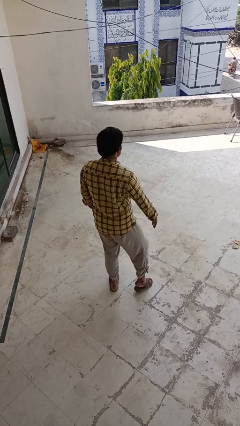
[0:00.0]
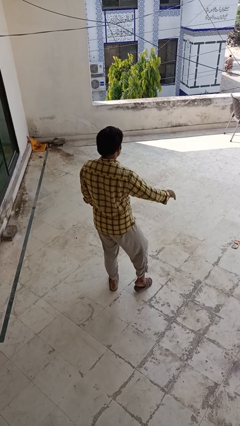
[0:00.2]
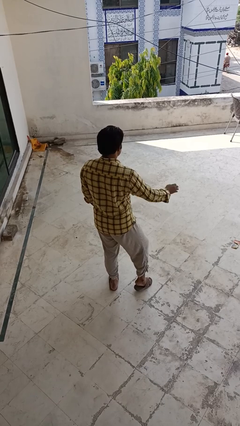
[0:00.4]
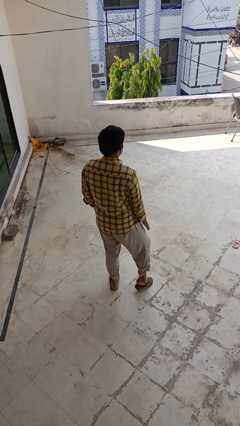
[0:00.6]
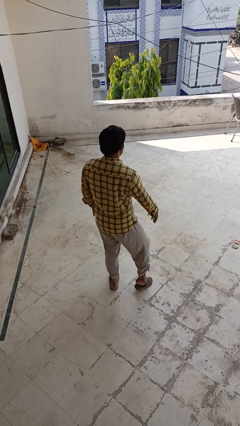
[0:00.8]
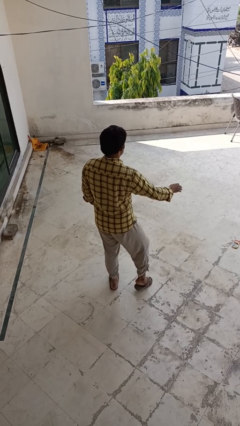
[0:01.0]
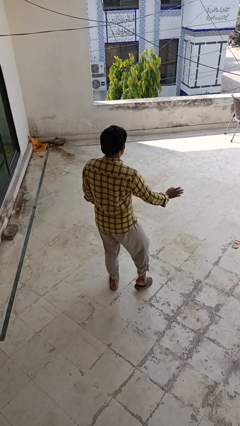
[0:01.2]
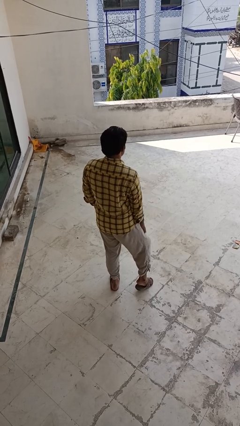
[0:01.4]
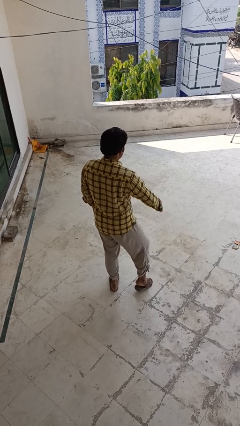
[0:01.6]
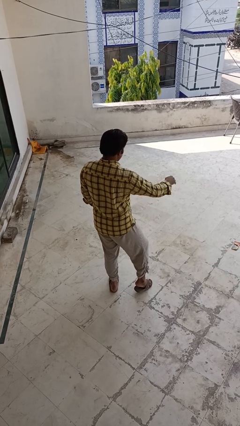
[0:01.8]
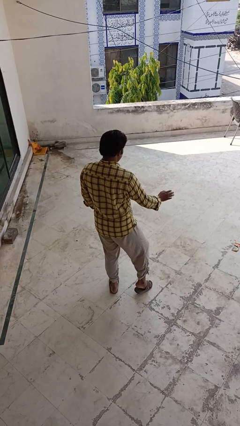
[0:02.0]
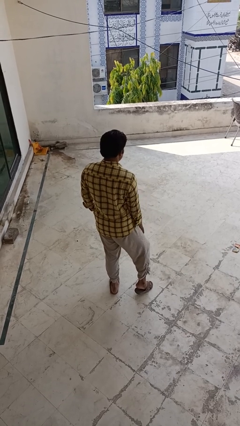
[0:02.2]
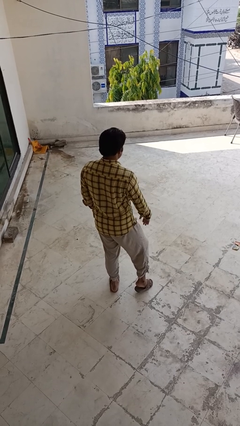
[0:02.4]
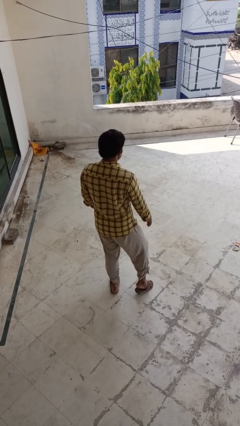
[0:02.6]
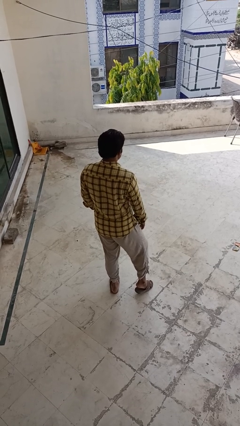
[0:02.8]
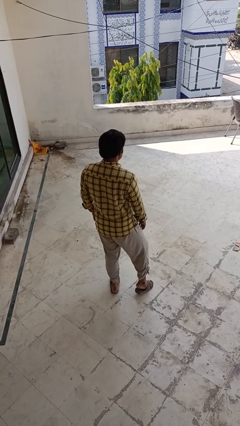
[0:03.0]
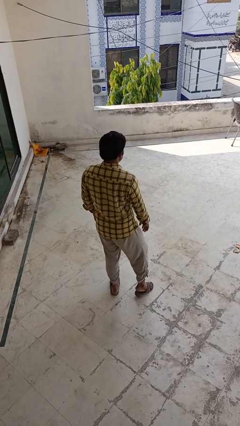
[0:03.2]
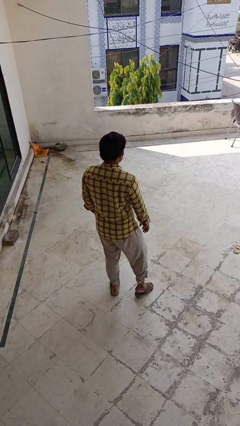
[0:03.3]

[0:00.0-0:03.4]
person slaps hands on thighs

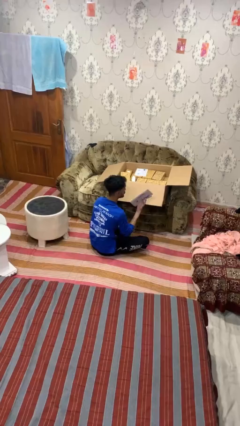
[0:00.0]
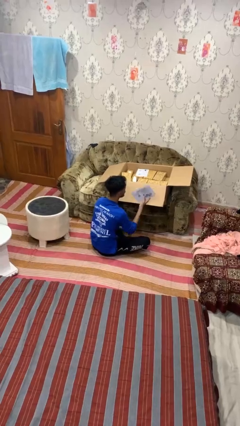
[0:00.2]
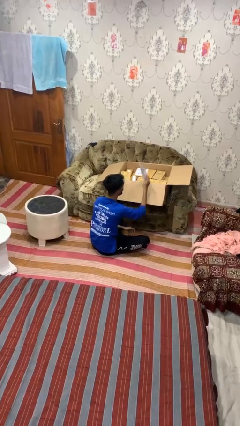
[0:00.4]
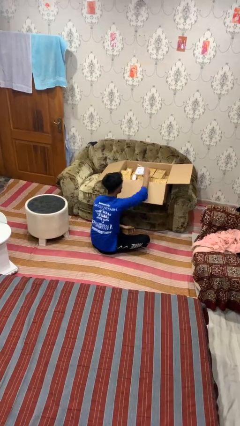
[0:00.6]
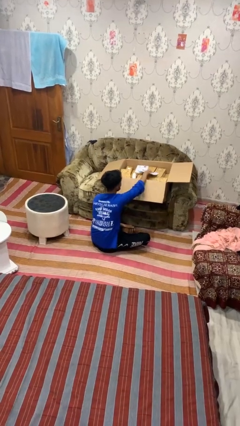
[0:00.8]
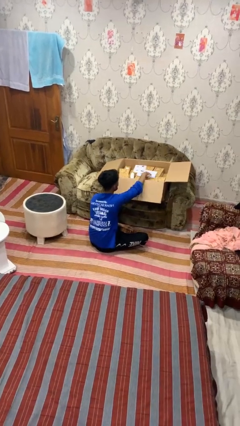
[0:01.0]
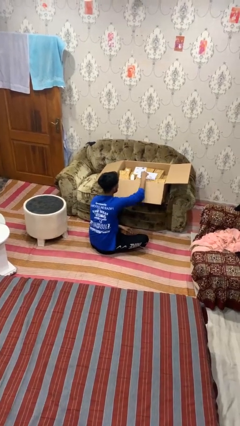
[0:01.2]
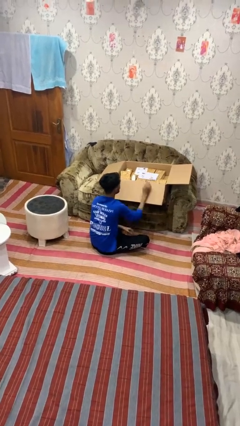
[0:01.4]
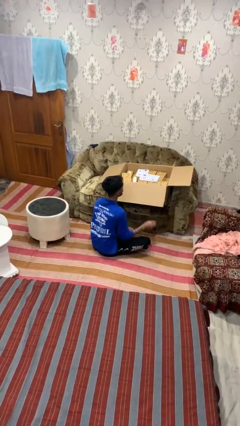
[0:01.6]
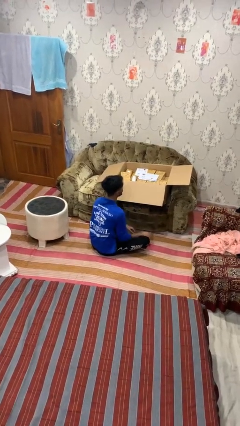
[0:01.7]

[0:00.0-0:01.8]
person puts object into box

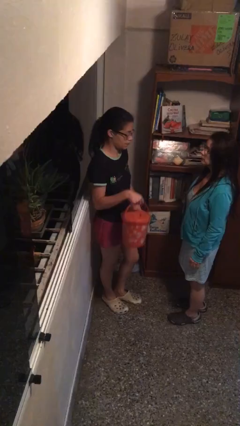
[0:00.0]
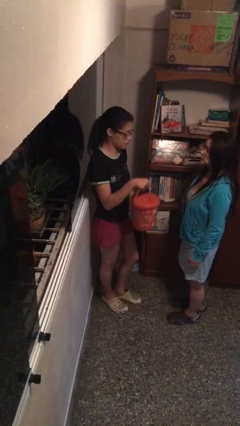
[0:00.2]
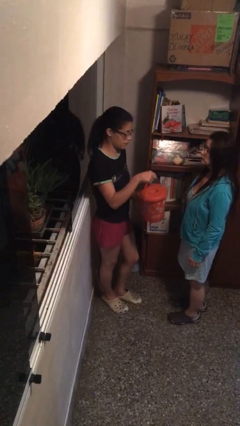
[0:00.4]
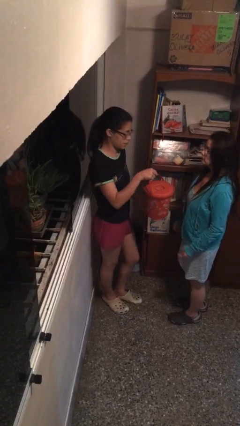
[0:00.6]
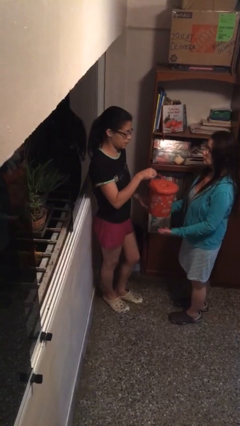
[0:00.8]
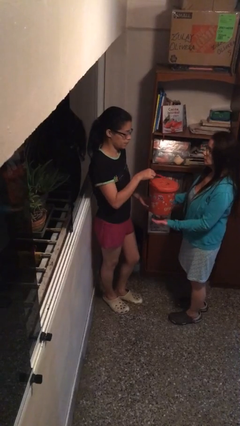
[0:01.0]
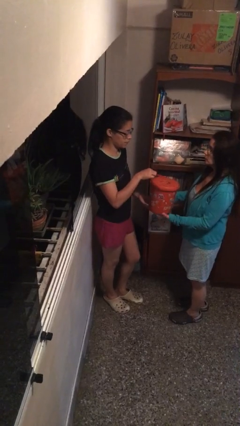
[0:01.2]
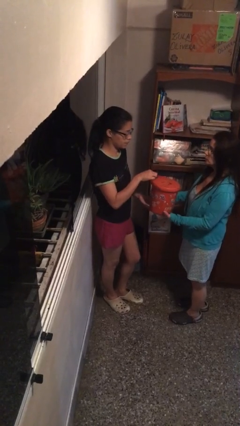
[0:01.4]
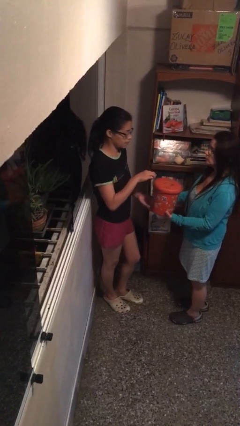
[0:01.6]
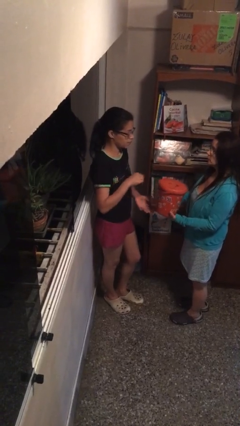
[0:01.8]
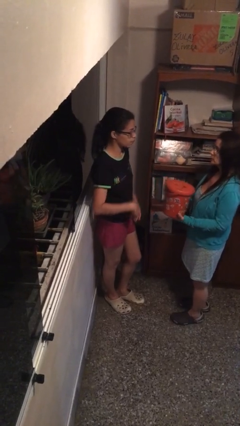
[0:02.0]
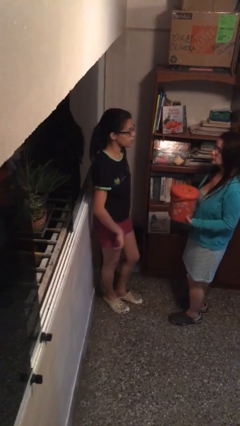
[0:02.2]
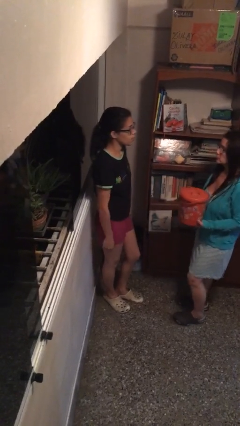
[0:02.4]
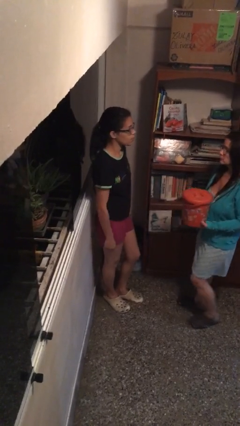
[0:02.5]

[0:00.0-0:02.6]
person transfers object to person

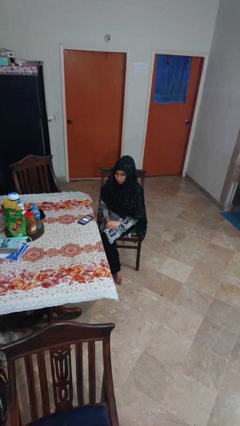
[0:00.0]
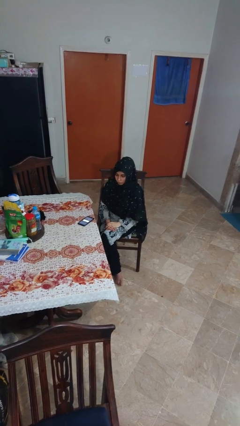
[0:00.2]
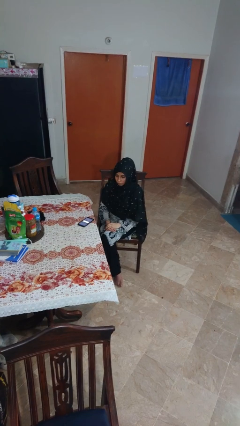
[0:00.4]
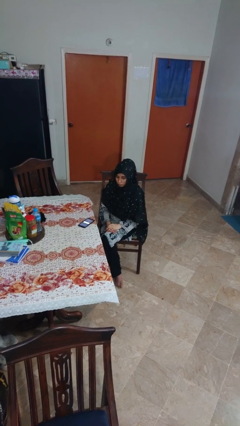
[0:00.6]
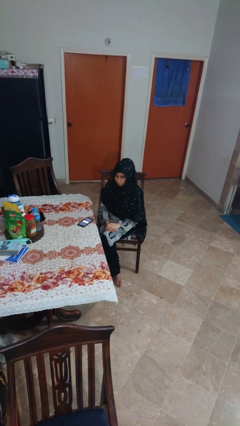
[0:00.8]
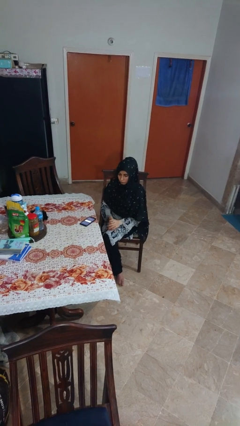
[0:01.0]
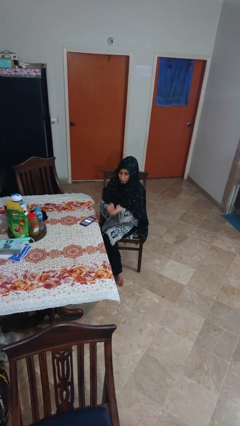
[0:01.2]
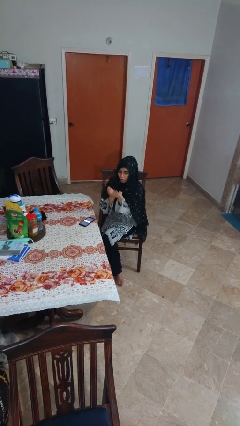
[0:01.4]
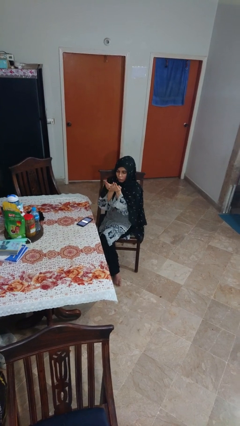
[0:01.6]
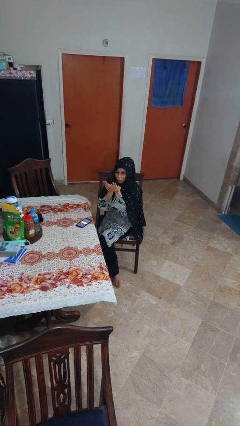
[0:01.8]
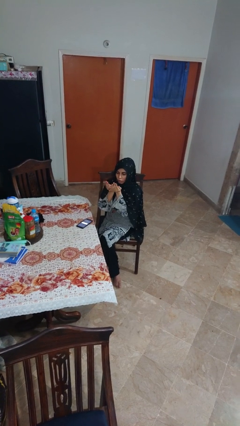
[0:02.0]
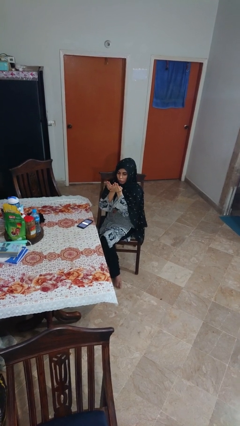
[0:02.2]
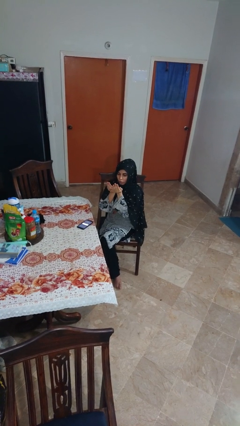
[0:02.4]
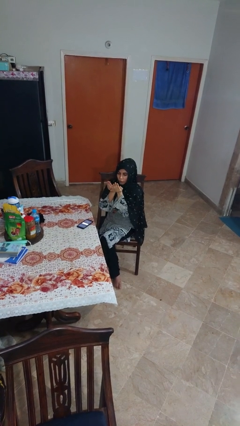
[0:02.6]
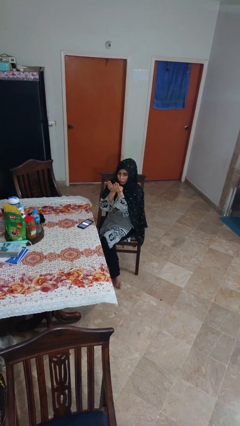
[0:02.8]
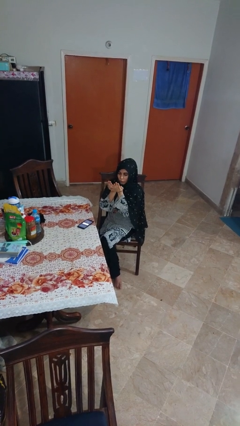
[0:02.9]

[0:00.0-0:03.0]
person prays

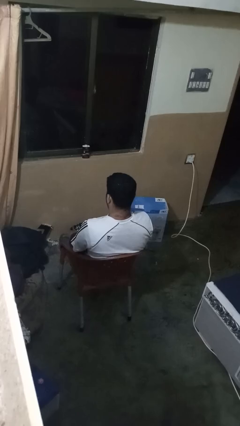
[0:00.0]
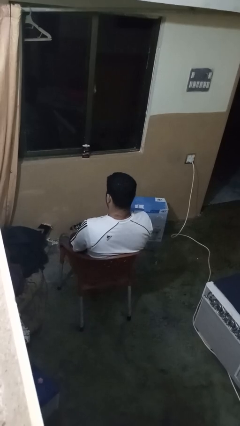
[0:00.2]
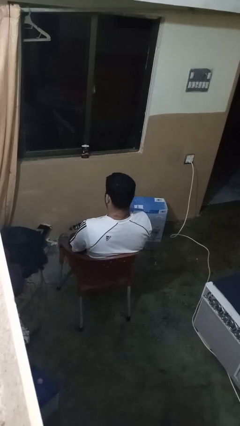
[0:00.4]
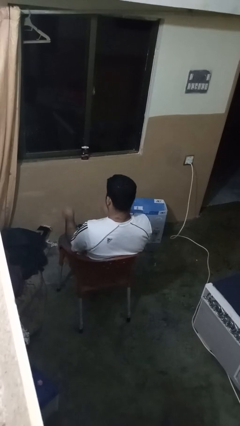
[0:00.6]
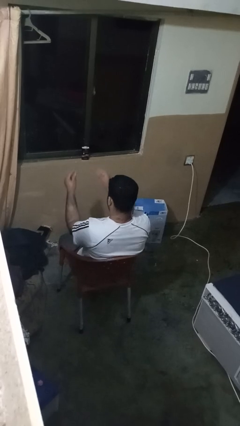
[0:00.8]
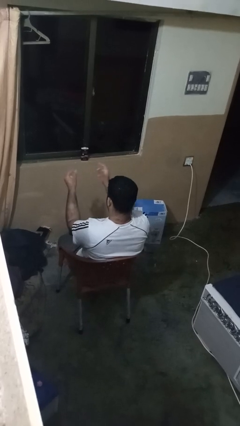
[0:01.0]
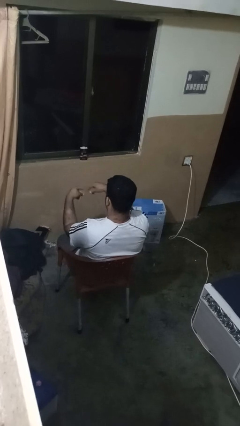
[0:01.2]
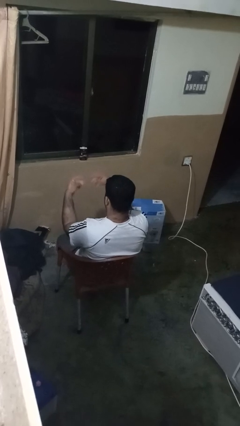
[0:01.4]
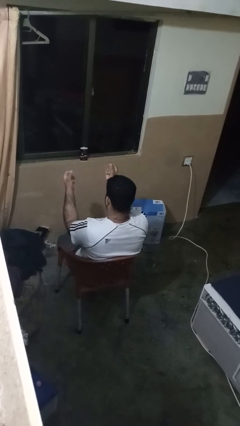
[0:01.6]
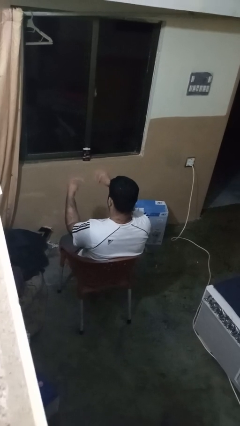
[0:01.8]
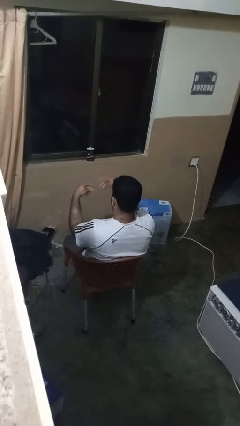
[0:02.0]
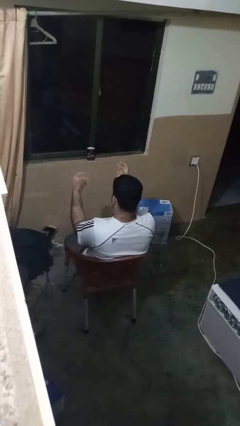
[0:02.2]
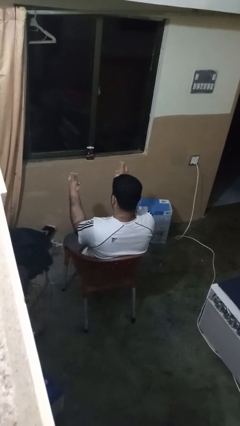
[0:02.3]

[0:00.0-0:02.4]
person snaps fingers

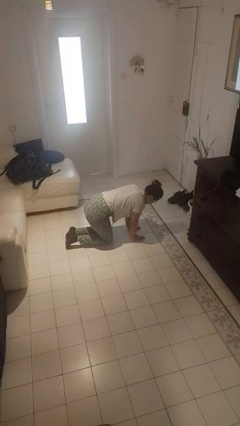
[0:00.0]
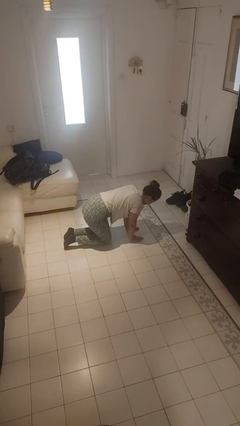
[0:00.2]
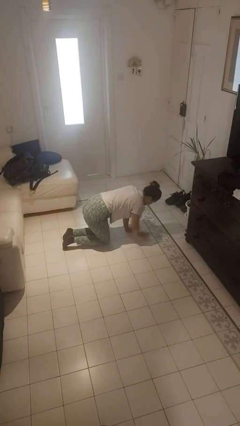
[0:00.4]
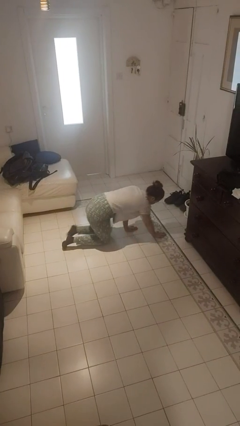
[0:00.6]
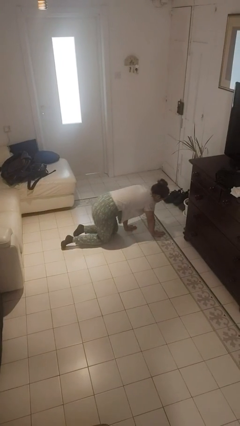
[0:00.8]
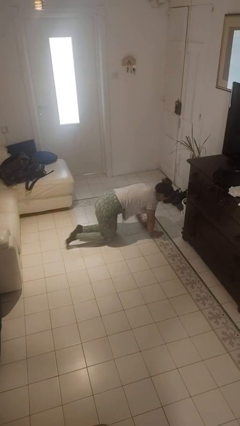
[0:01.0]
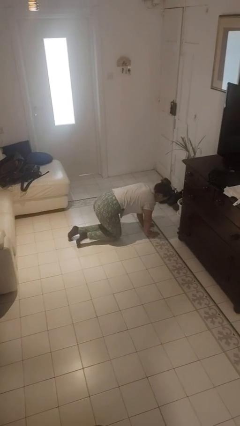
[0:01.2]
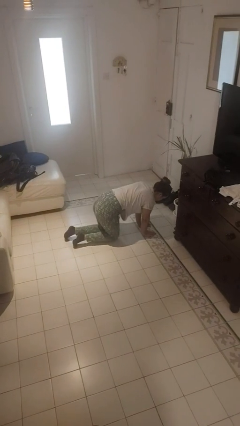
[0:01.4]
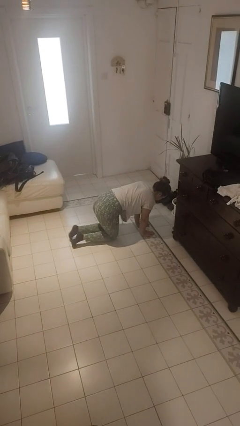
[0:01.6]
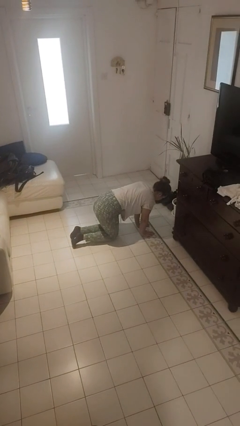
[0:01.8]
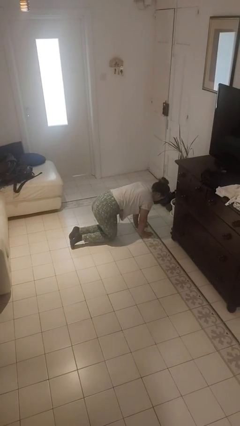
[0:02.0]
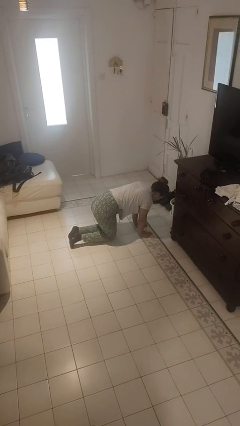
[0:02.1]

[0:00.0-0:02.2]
person crawls

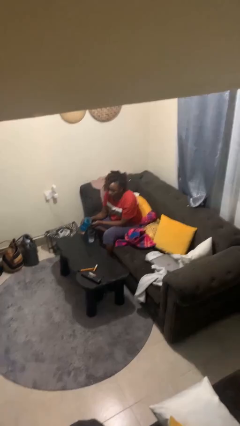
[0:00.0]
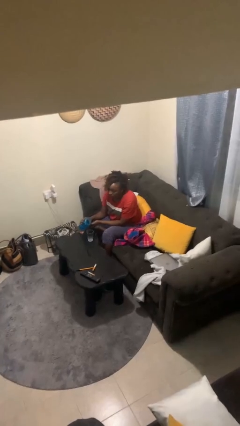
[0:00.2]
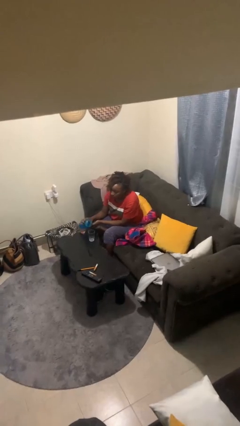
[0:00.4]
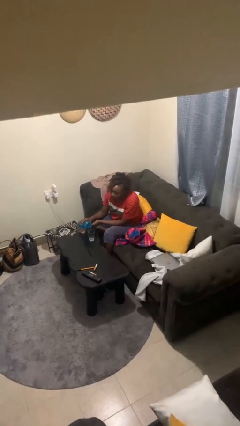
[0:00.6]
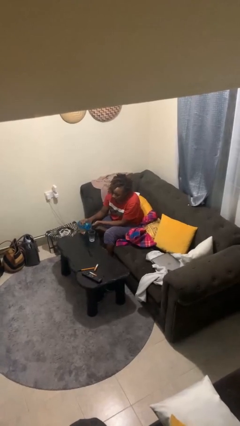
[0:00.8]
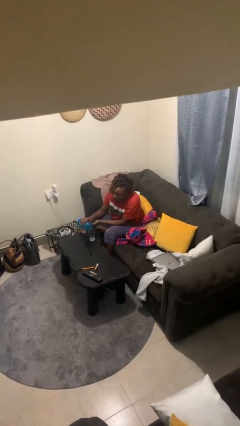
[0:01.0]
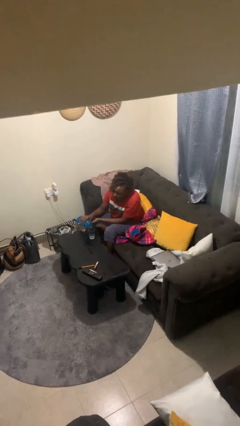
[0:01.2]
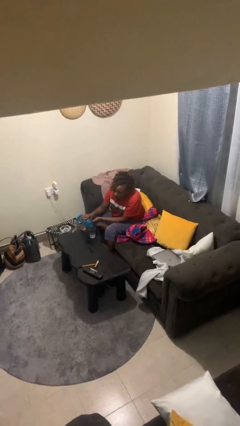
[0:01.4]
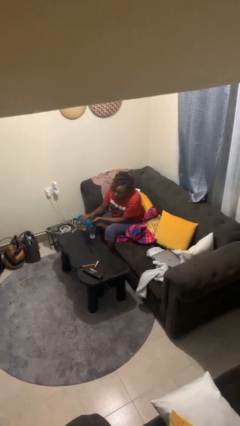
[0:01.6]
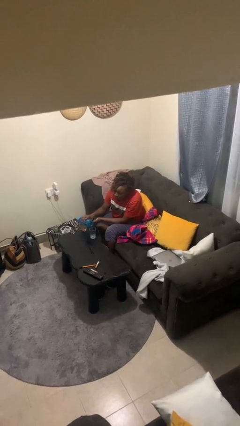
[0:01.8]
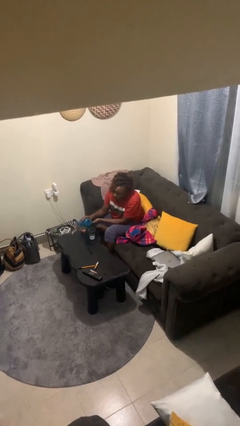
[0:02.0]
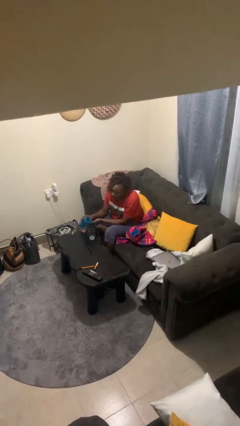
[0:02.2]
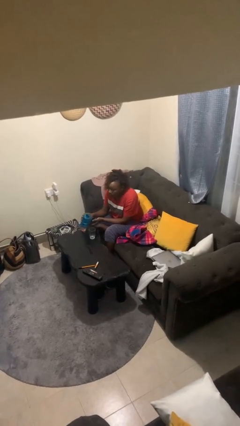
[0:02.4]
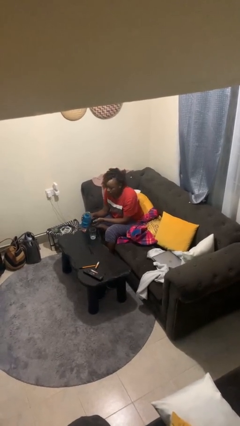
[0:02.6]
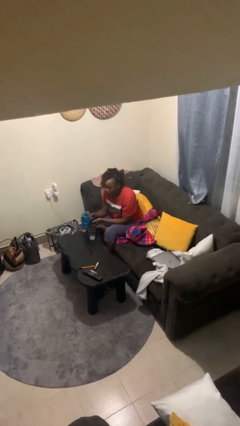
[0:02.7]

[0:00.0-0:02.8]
person pours liquid into cup
